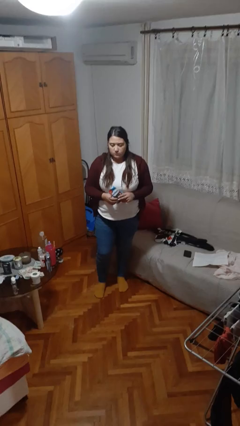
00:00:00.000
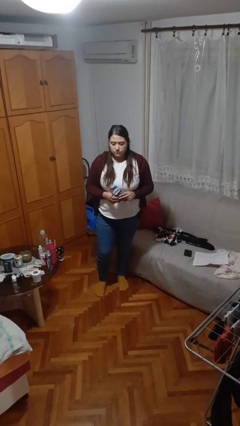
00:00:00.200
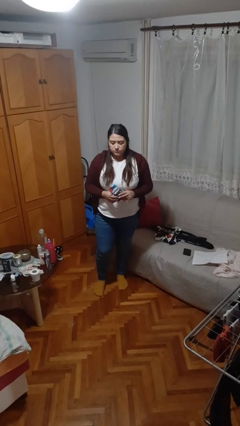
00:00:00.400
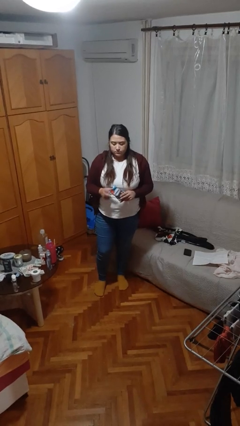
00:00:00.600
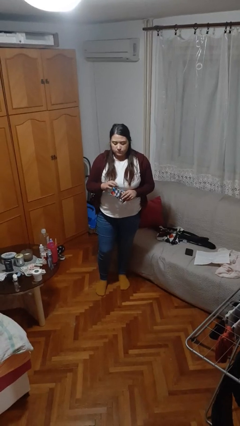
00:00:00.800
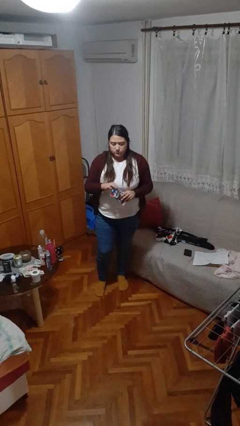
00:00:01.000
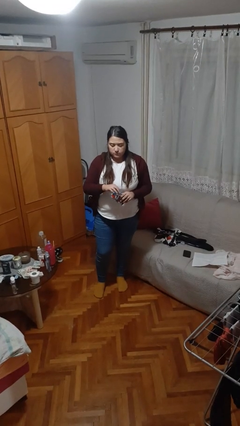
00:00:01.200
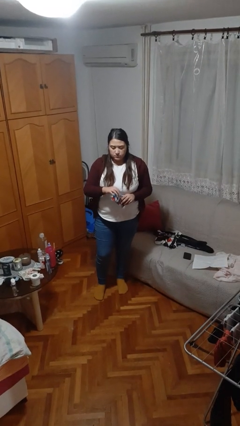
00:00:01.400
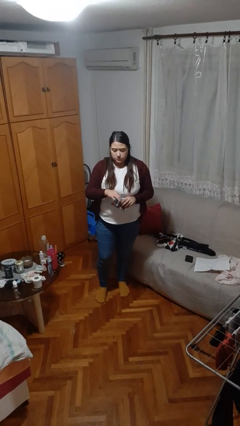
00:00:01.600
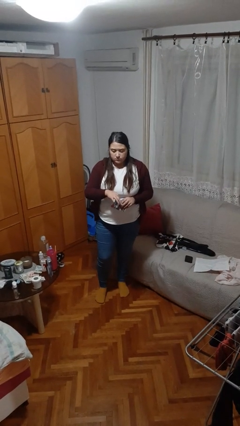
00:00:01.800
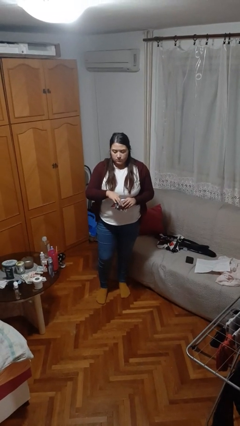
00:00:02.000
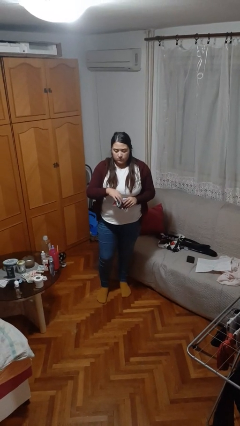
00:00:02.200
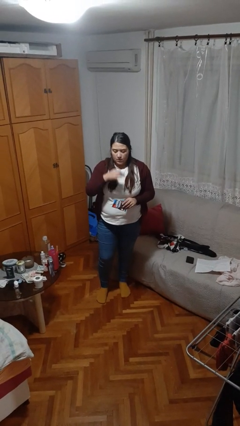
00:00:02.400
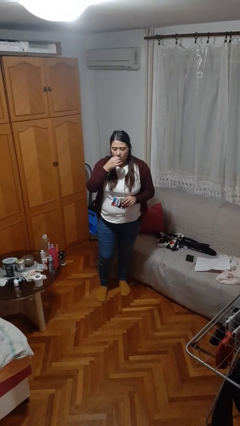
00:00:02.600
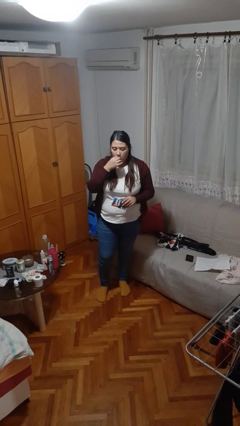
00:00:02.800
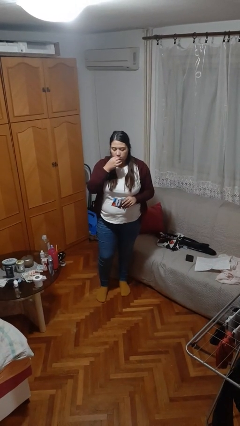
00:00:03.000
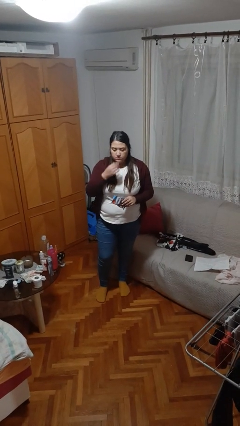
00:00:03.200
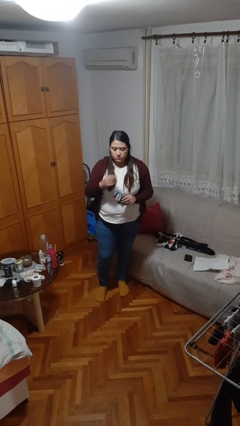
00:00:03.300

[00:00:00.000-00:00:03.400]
person eats snack from bag

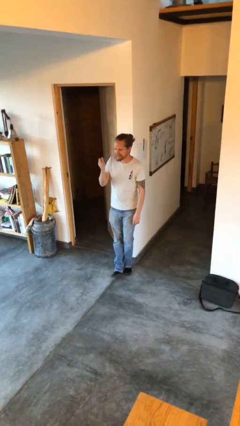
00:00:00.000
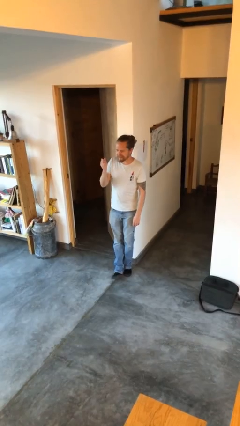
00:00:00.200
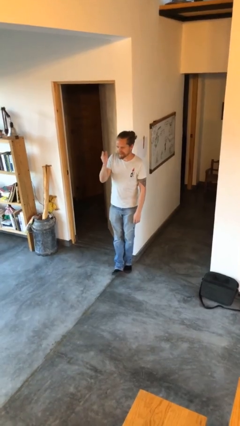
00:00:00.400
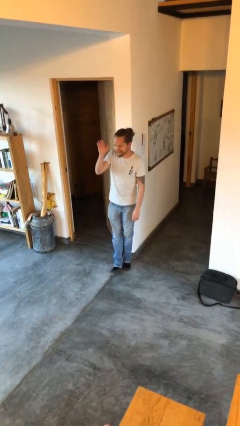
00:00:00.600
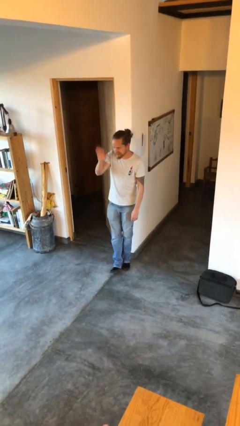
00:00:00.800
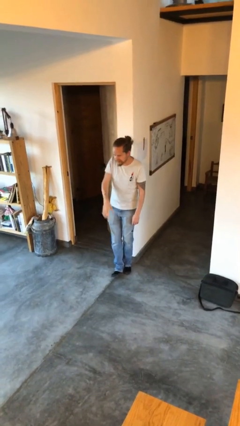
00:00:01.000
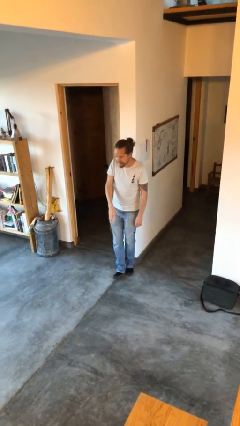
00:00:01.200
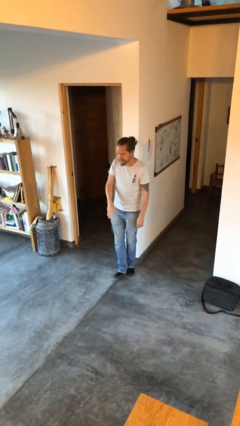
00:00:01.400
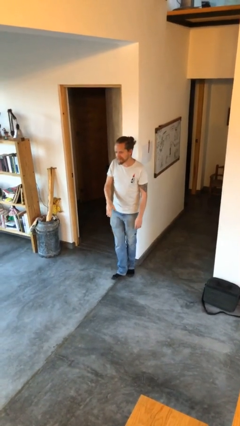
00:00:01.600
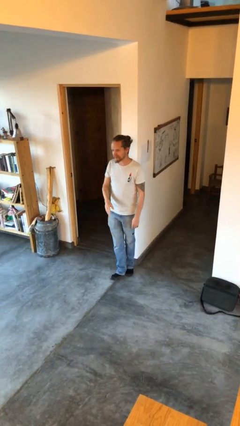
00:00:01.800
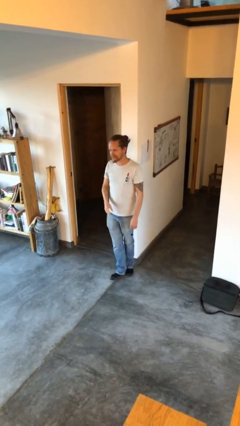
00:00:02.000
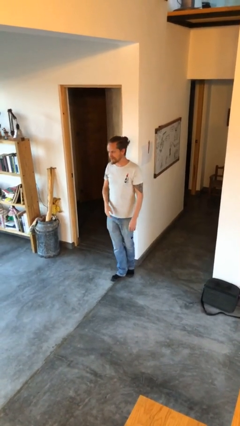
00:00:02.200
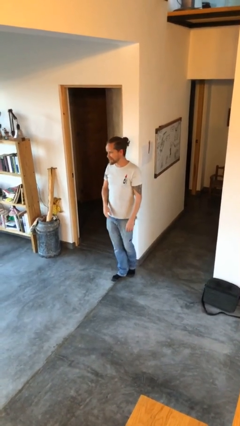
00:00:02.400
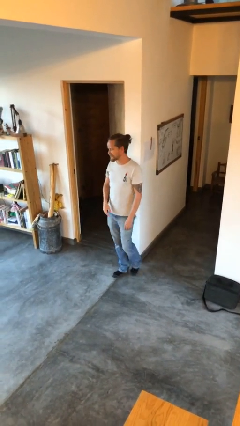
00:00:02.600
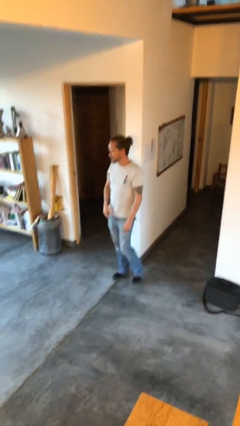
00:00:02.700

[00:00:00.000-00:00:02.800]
person gestures swipe down

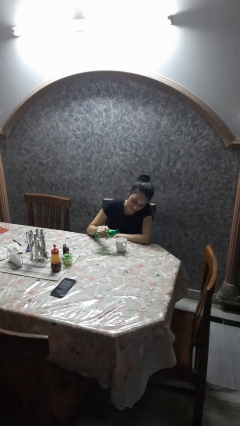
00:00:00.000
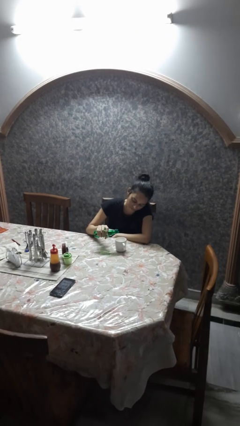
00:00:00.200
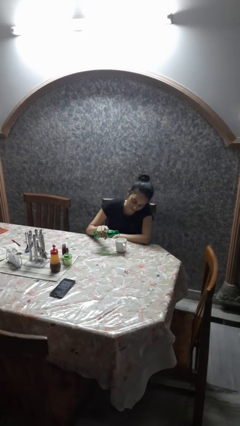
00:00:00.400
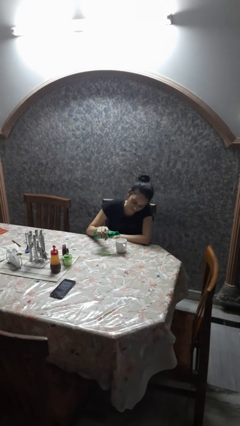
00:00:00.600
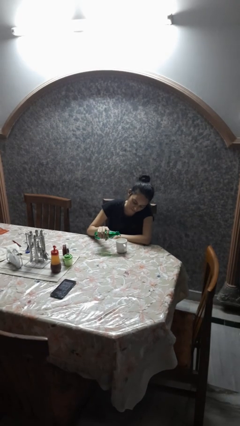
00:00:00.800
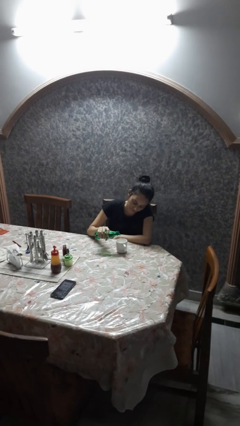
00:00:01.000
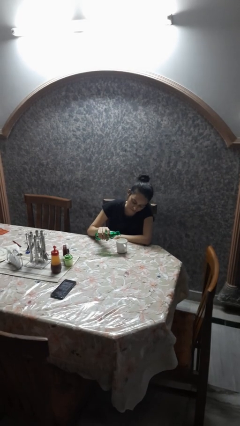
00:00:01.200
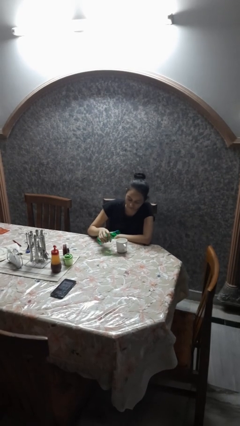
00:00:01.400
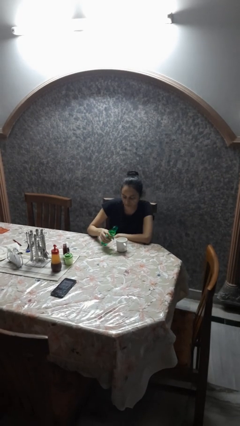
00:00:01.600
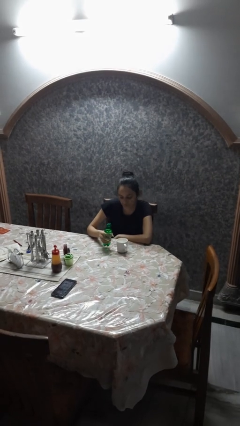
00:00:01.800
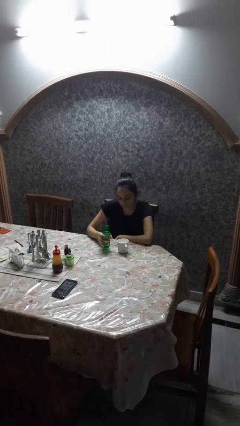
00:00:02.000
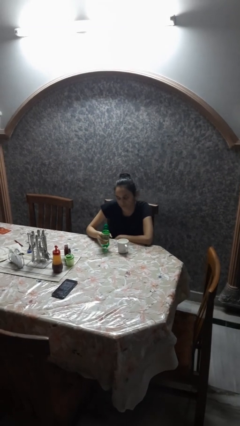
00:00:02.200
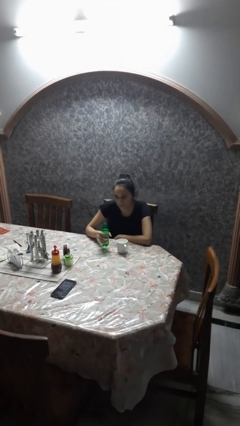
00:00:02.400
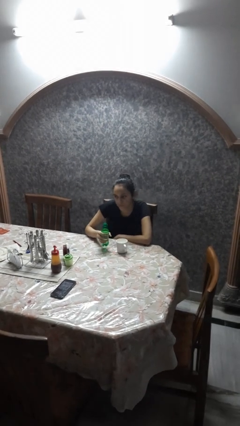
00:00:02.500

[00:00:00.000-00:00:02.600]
person pours liquid into cup

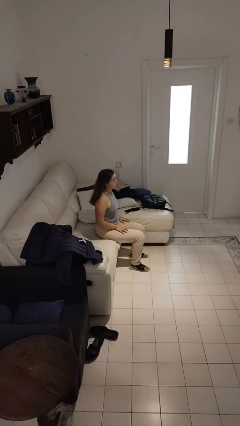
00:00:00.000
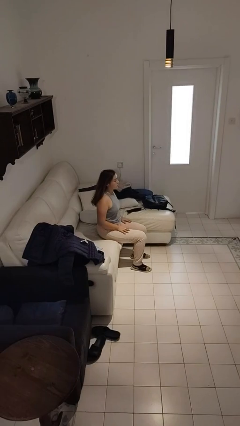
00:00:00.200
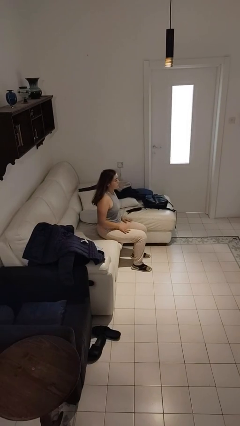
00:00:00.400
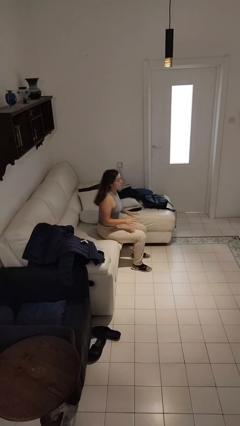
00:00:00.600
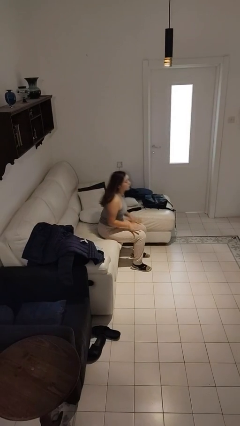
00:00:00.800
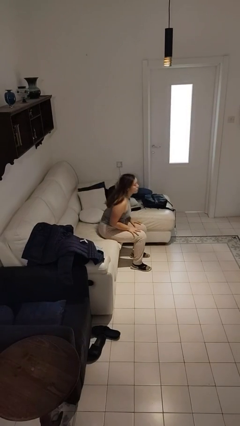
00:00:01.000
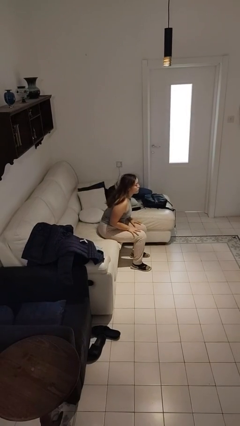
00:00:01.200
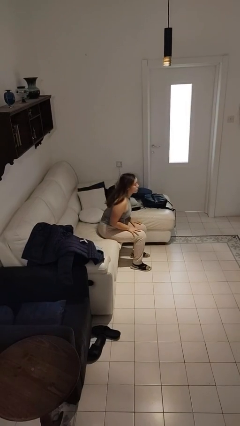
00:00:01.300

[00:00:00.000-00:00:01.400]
person slaps hands on thighs

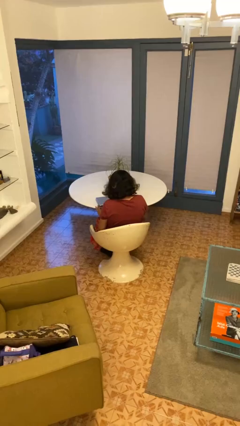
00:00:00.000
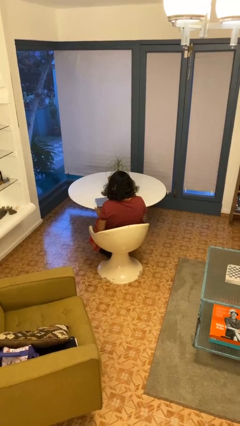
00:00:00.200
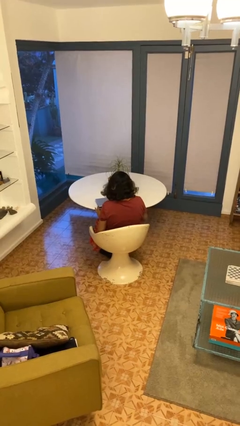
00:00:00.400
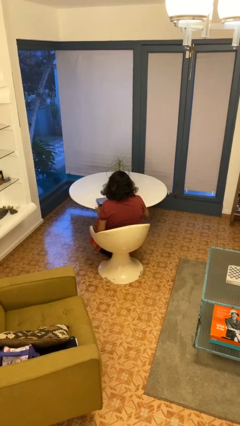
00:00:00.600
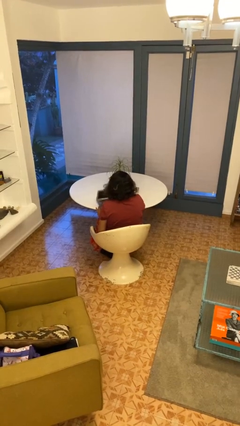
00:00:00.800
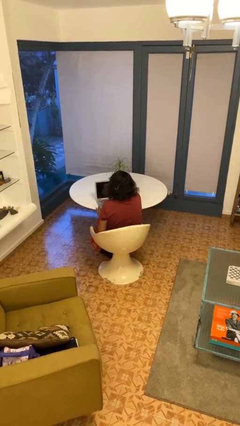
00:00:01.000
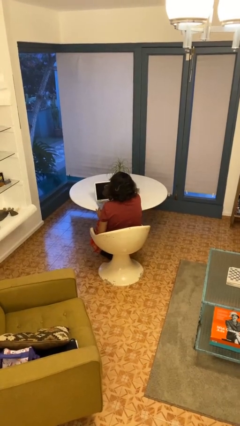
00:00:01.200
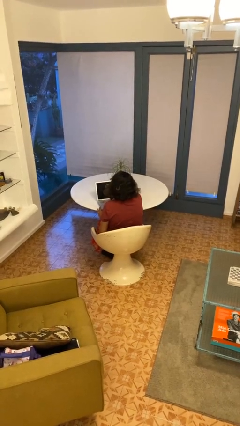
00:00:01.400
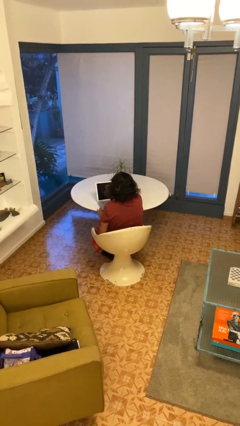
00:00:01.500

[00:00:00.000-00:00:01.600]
person opens laptop

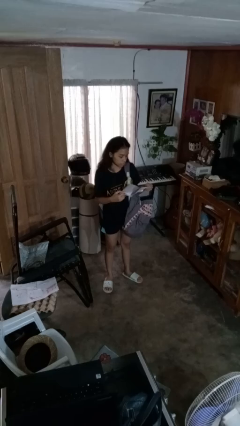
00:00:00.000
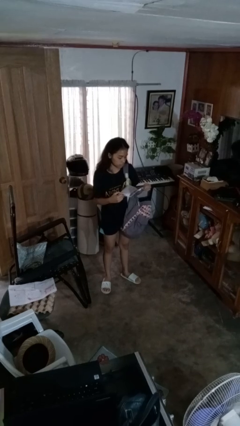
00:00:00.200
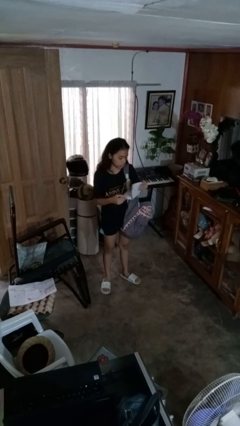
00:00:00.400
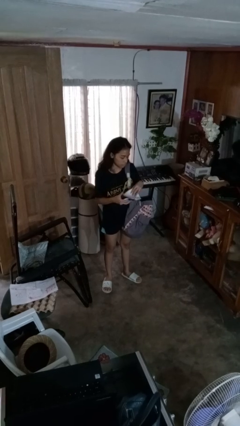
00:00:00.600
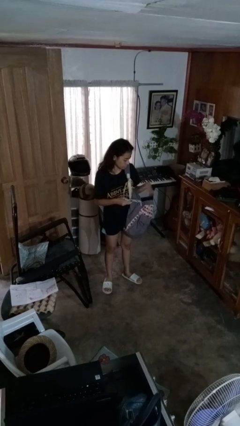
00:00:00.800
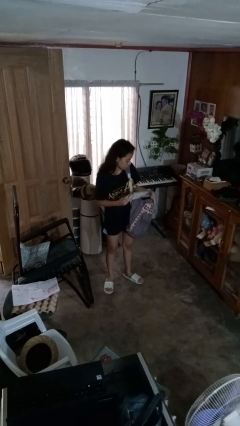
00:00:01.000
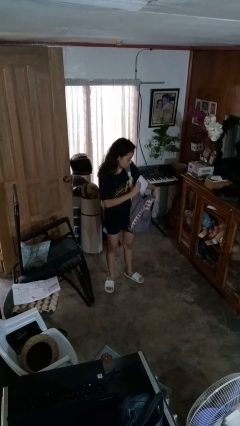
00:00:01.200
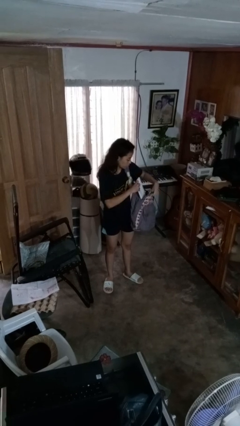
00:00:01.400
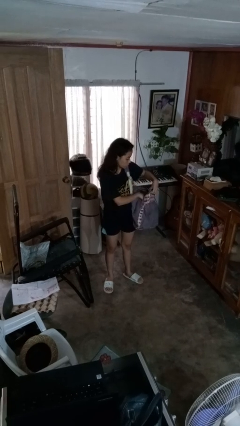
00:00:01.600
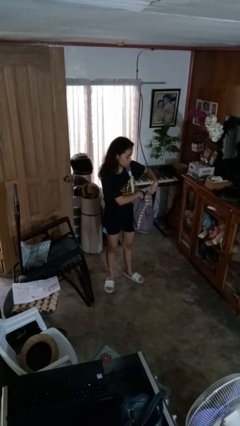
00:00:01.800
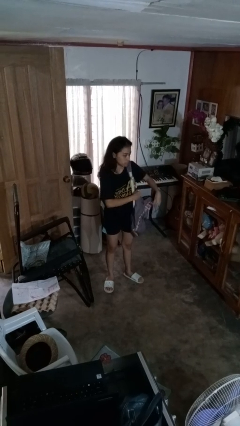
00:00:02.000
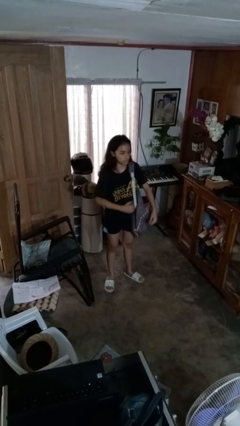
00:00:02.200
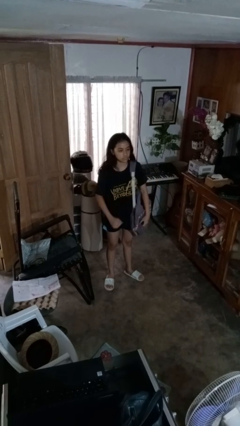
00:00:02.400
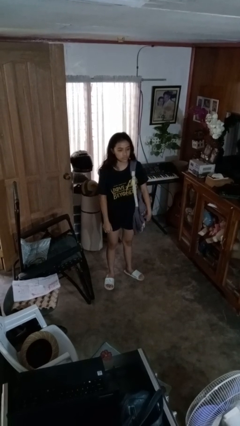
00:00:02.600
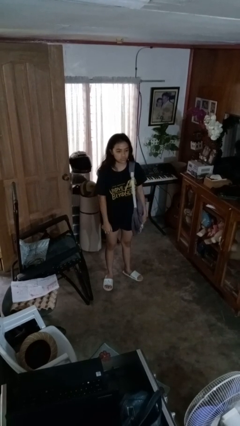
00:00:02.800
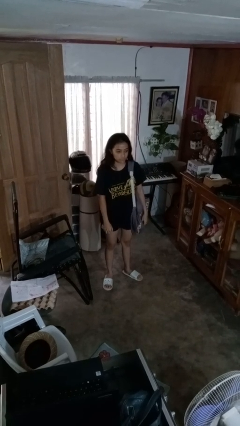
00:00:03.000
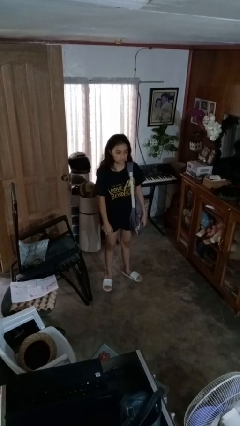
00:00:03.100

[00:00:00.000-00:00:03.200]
person puts object into backpack

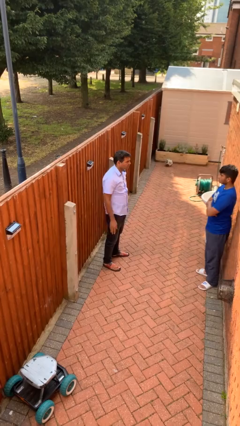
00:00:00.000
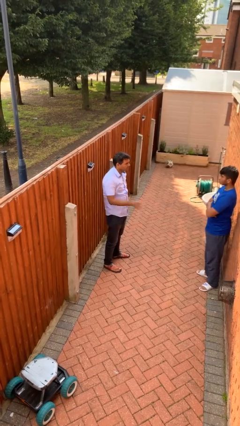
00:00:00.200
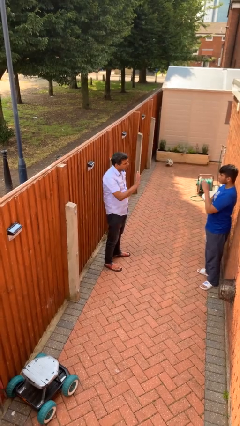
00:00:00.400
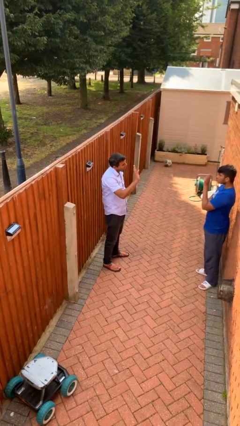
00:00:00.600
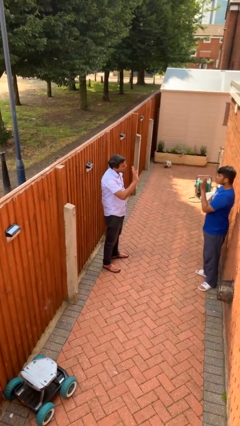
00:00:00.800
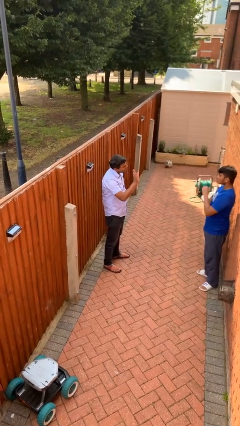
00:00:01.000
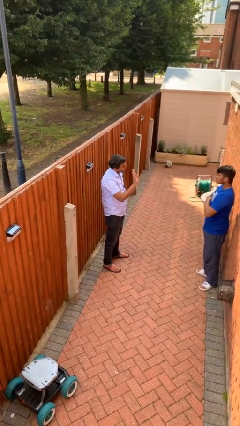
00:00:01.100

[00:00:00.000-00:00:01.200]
person waves at person

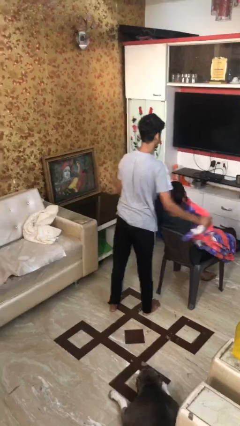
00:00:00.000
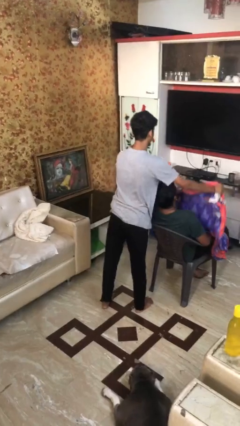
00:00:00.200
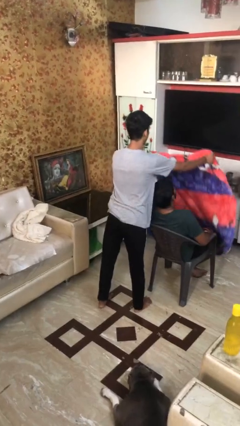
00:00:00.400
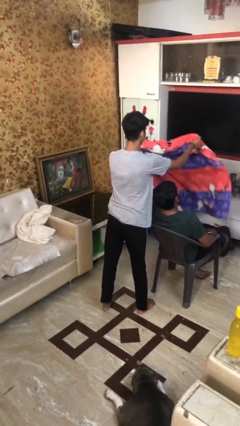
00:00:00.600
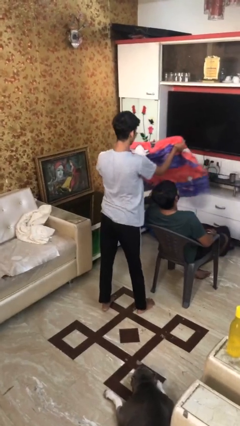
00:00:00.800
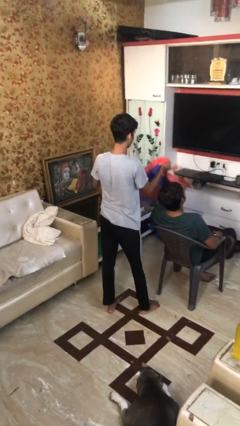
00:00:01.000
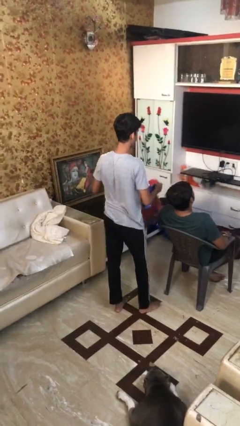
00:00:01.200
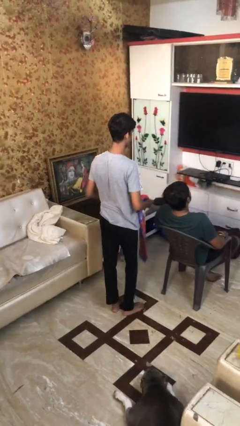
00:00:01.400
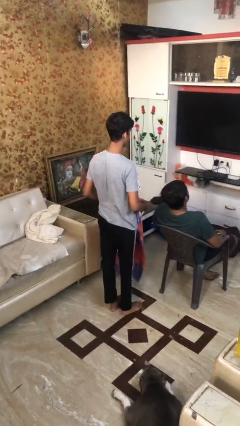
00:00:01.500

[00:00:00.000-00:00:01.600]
person uncovers friend with blanket
